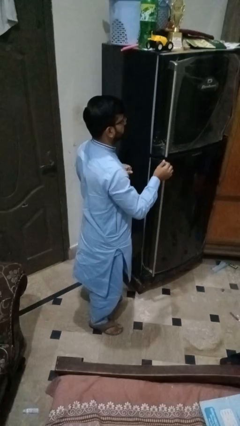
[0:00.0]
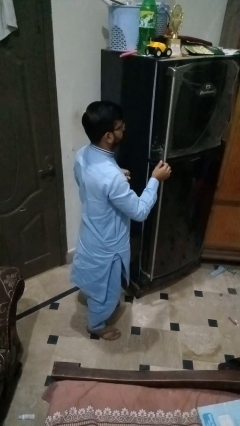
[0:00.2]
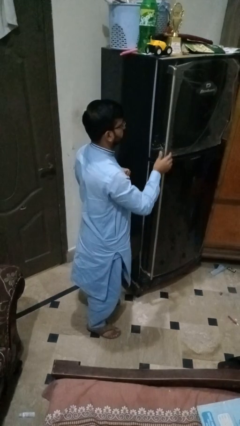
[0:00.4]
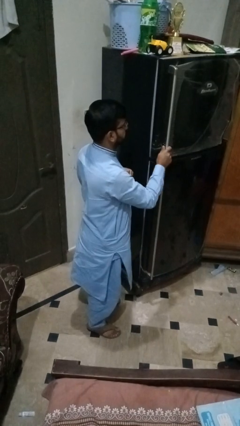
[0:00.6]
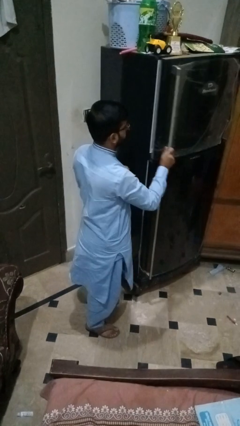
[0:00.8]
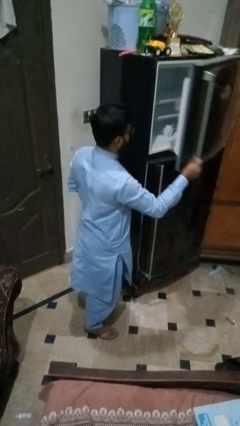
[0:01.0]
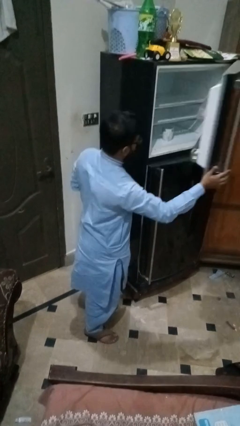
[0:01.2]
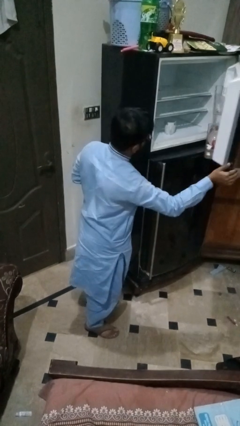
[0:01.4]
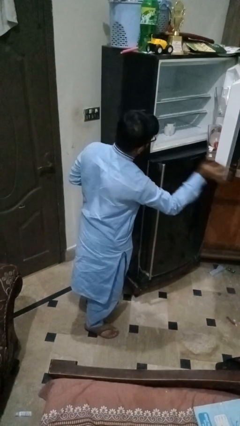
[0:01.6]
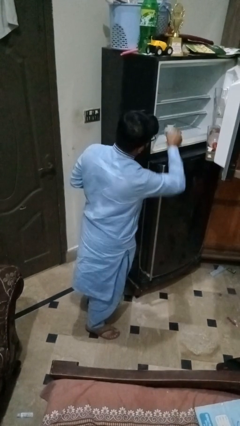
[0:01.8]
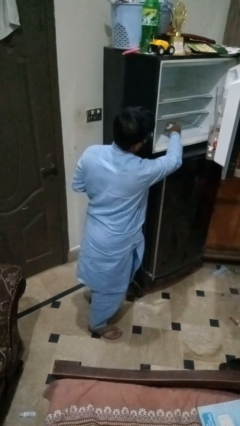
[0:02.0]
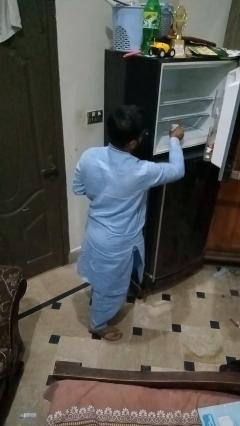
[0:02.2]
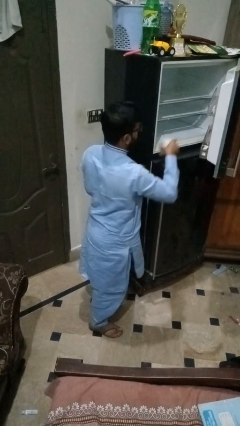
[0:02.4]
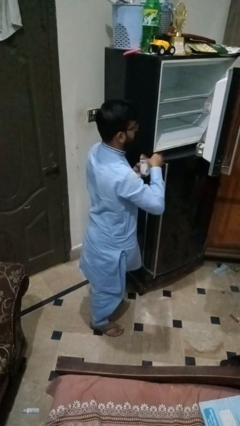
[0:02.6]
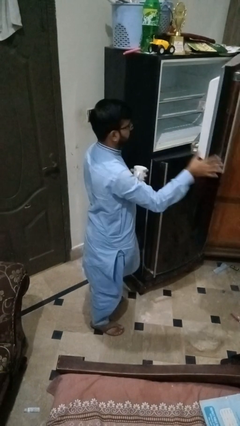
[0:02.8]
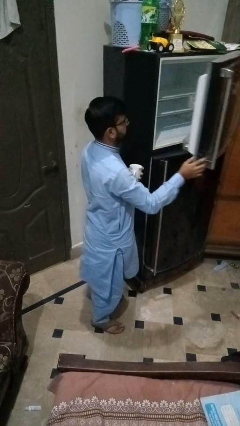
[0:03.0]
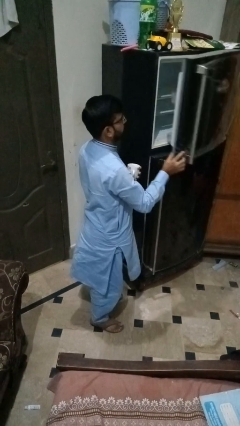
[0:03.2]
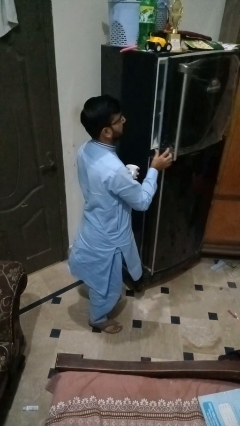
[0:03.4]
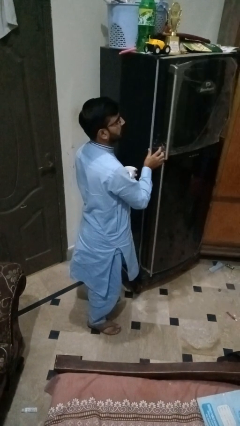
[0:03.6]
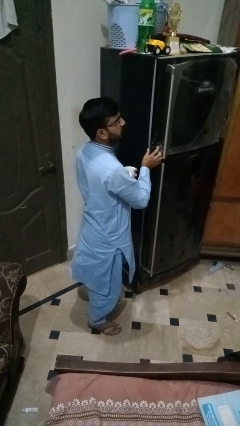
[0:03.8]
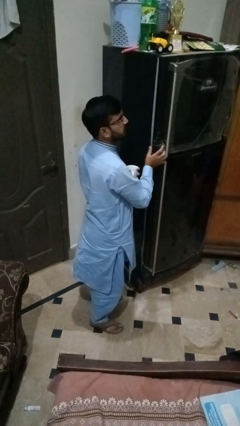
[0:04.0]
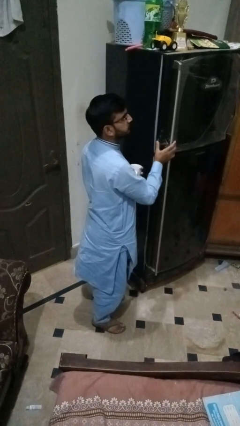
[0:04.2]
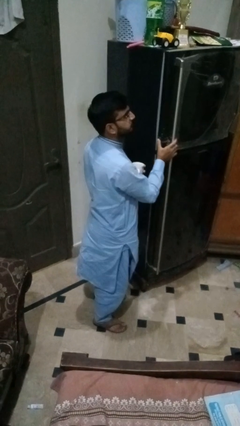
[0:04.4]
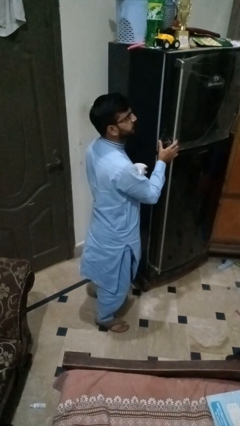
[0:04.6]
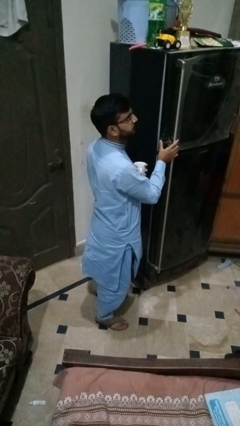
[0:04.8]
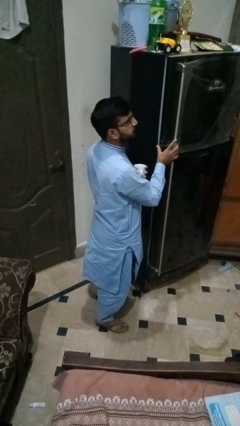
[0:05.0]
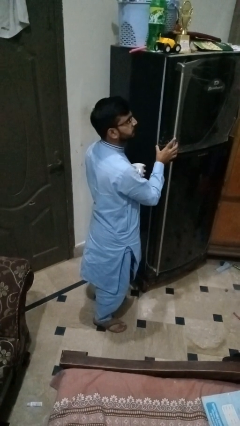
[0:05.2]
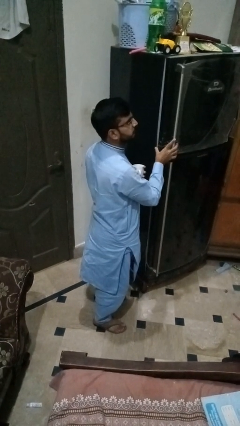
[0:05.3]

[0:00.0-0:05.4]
person takes object from refrigerator

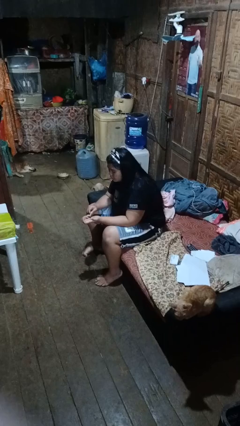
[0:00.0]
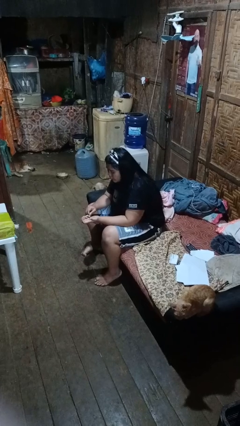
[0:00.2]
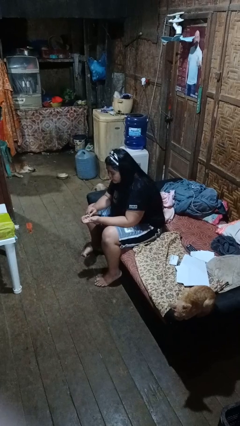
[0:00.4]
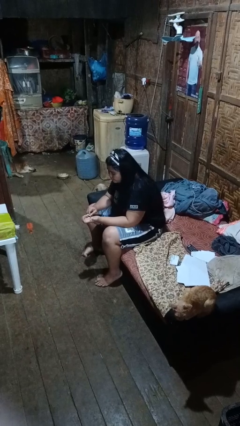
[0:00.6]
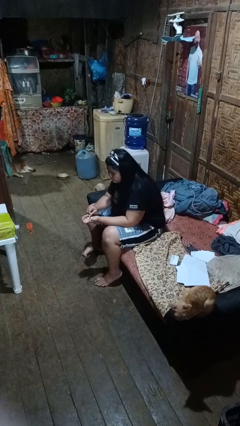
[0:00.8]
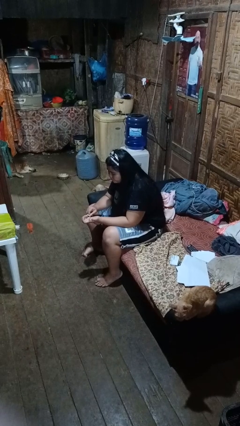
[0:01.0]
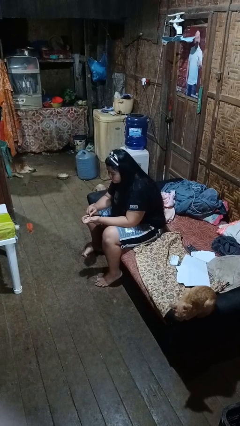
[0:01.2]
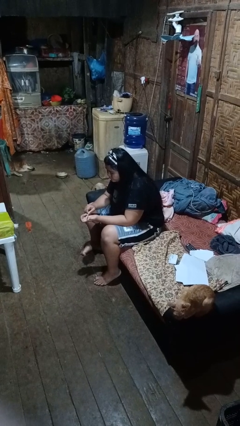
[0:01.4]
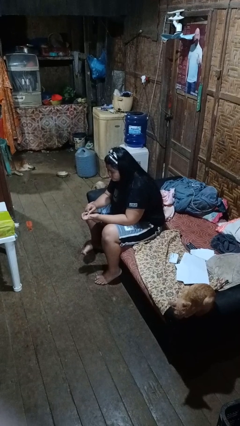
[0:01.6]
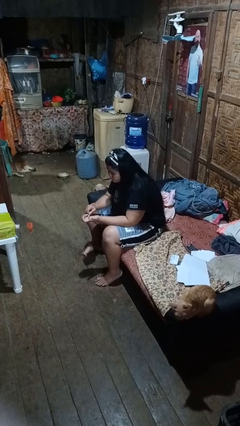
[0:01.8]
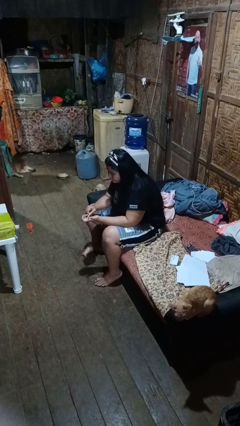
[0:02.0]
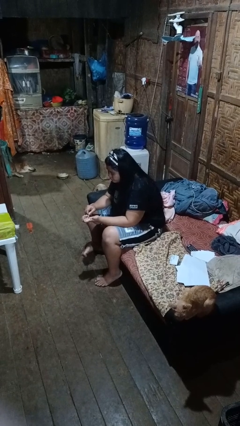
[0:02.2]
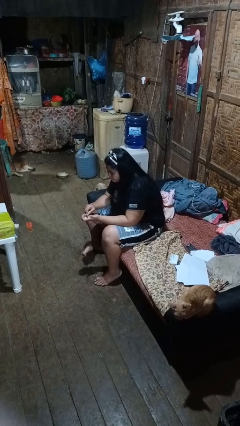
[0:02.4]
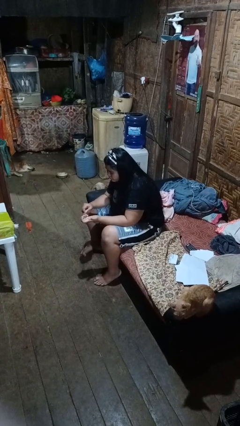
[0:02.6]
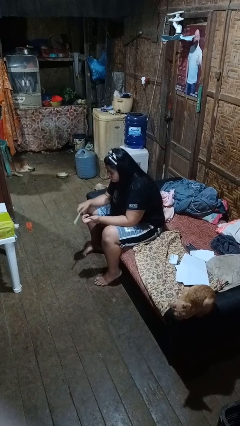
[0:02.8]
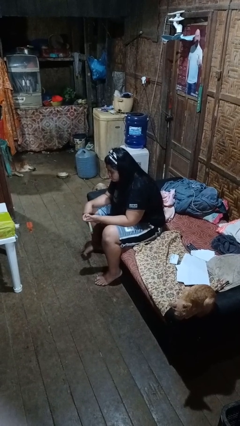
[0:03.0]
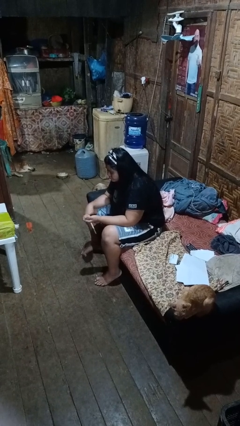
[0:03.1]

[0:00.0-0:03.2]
person files fingernails

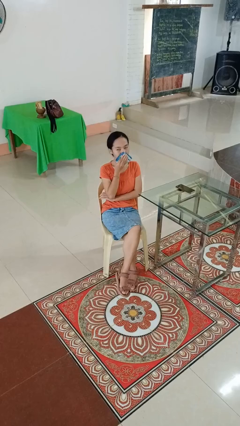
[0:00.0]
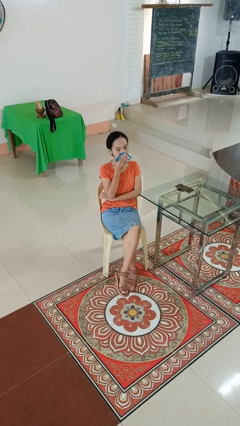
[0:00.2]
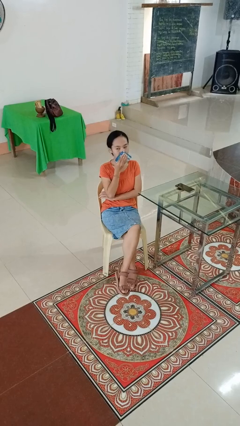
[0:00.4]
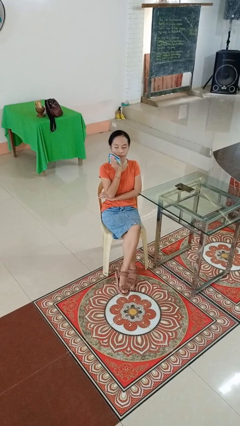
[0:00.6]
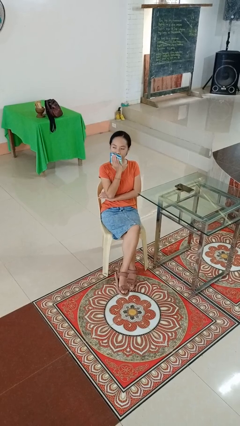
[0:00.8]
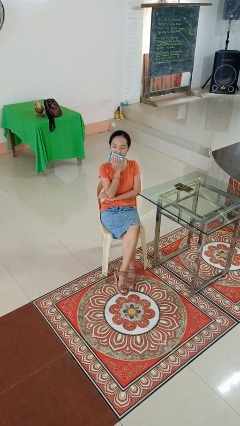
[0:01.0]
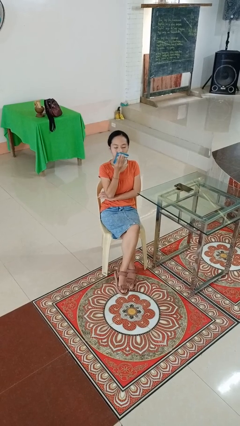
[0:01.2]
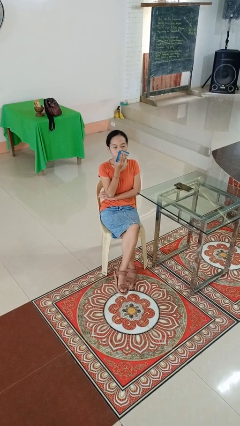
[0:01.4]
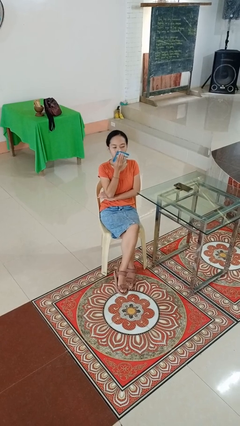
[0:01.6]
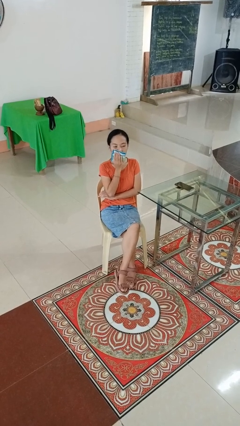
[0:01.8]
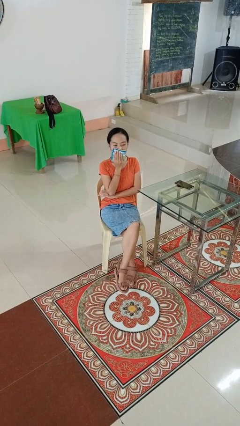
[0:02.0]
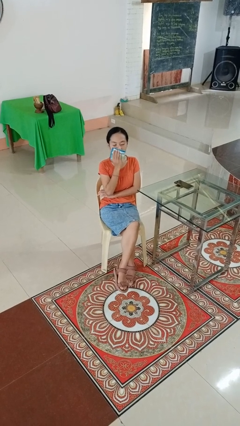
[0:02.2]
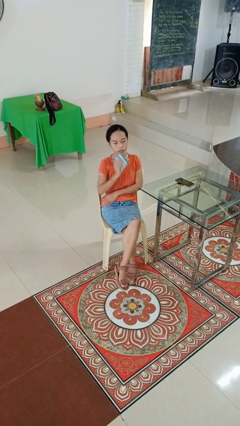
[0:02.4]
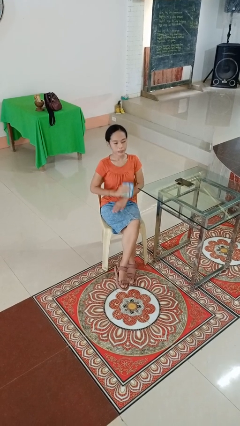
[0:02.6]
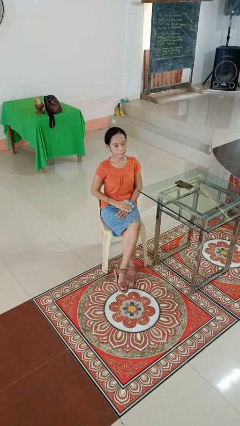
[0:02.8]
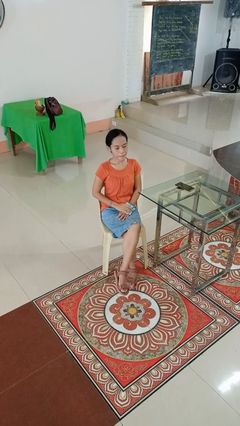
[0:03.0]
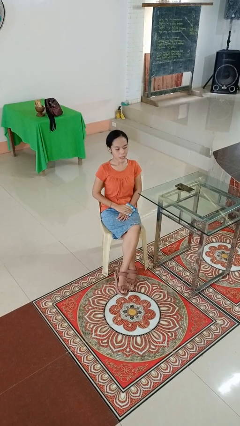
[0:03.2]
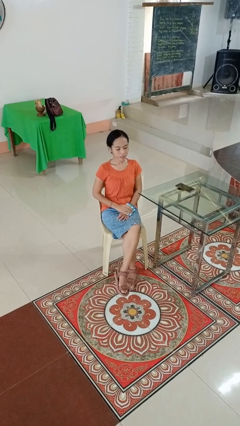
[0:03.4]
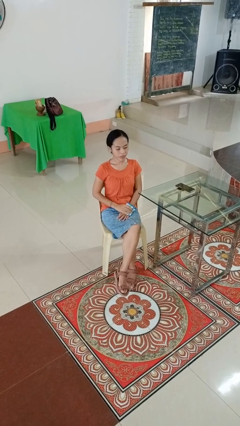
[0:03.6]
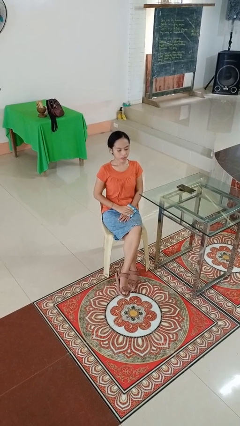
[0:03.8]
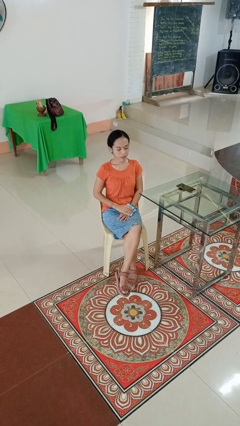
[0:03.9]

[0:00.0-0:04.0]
person wipes mouth with napkin

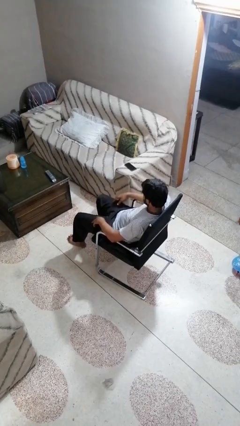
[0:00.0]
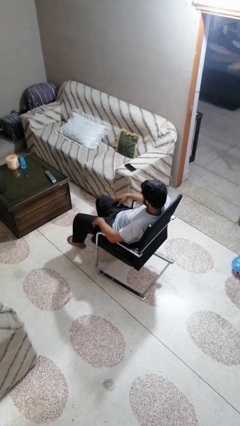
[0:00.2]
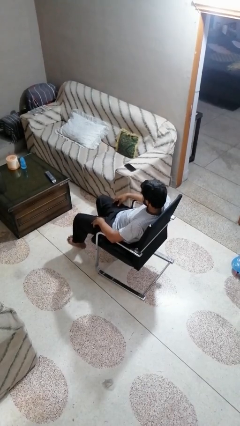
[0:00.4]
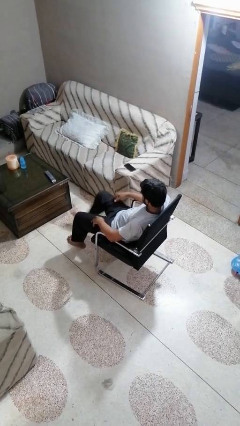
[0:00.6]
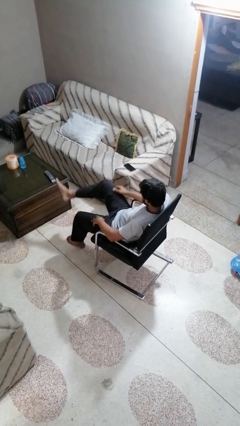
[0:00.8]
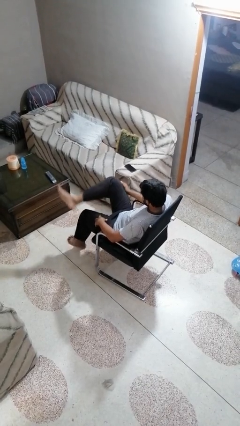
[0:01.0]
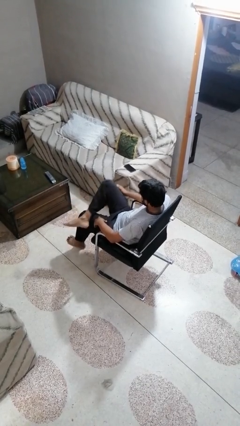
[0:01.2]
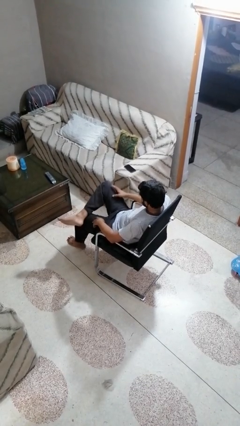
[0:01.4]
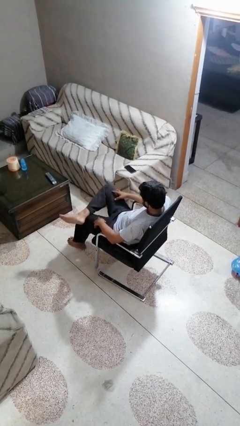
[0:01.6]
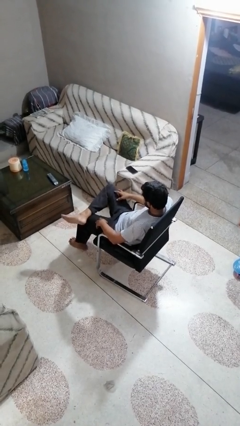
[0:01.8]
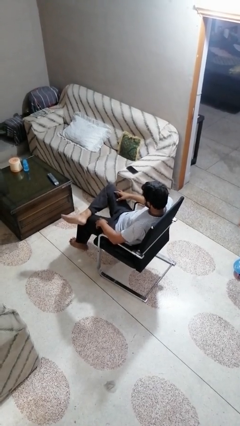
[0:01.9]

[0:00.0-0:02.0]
person crosses legs

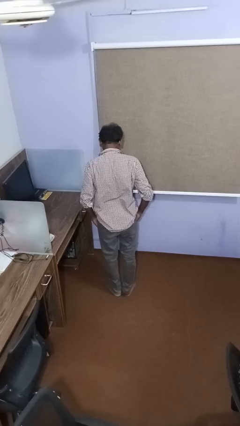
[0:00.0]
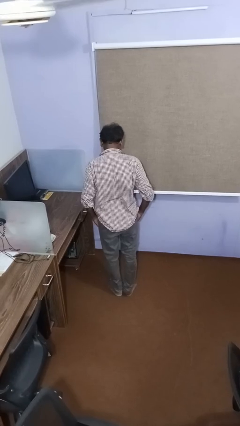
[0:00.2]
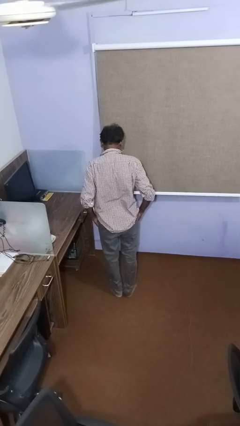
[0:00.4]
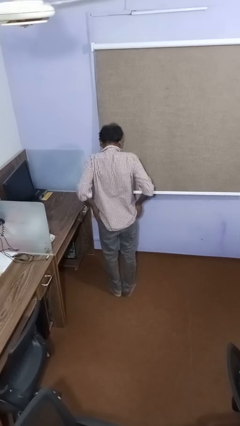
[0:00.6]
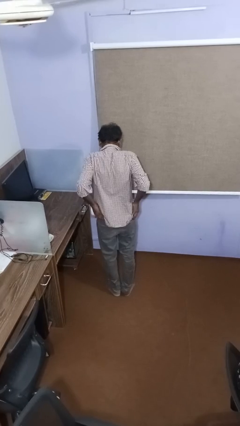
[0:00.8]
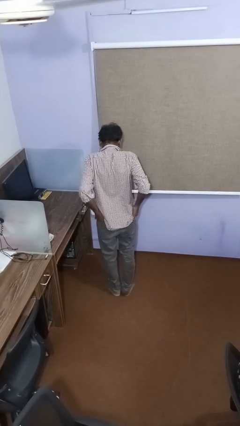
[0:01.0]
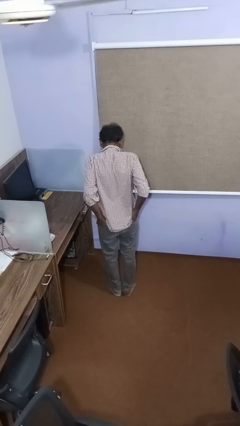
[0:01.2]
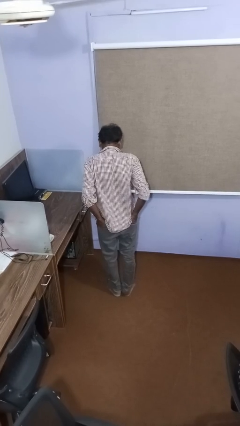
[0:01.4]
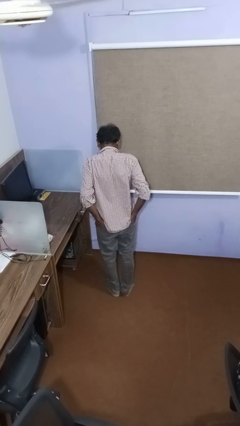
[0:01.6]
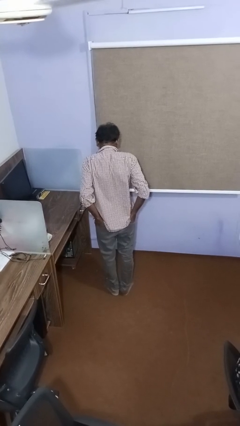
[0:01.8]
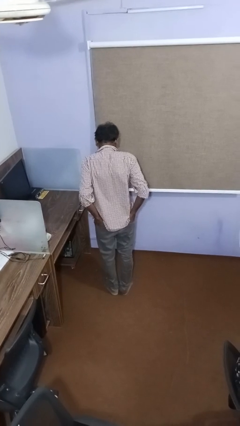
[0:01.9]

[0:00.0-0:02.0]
person puts hands in back pockets

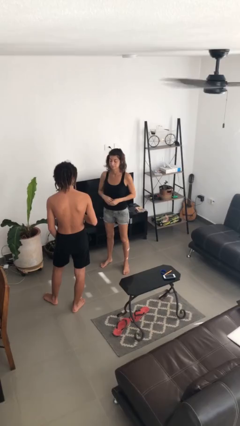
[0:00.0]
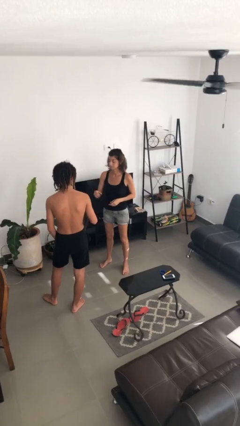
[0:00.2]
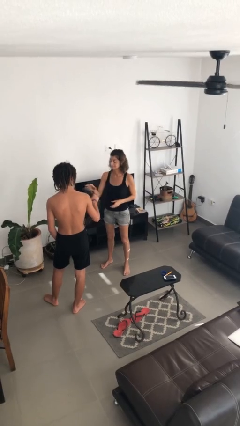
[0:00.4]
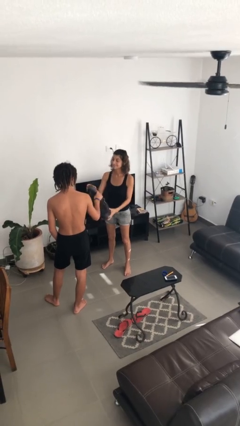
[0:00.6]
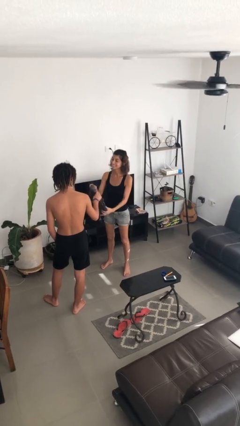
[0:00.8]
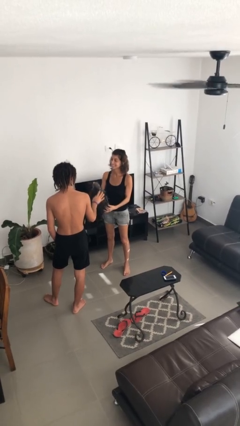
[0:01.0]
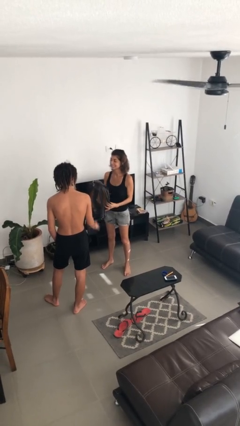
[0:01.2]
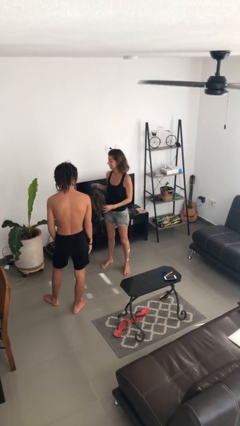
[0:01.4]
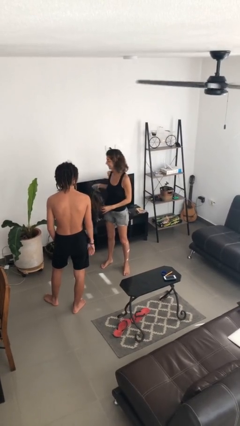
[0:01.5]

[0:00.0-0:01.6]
person transfers object to person
